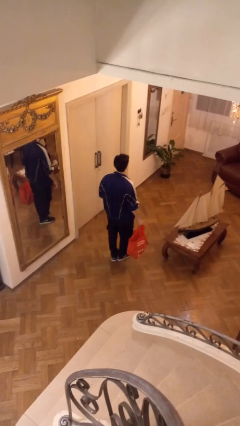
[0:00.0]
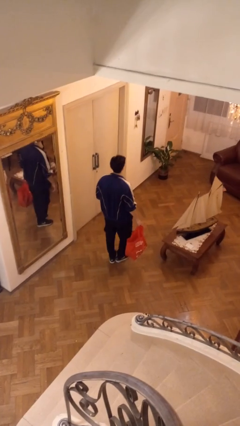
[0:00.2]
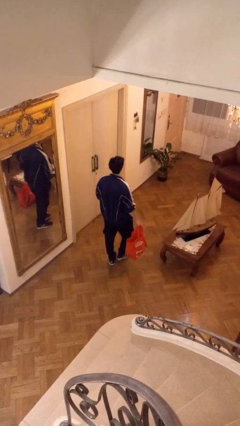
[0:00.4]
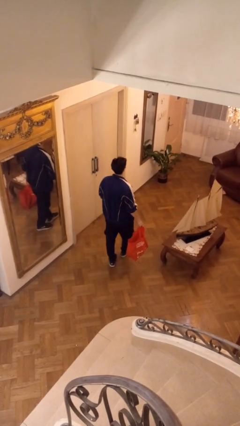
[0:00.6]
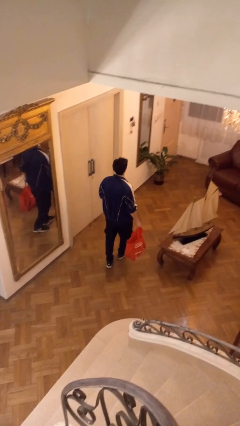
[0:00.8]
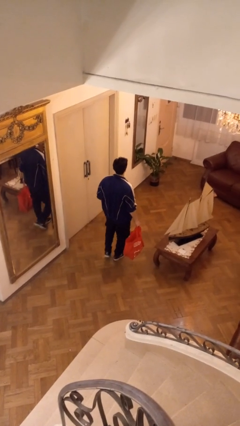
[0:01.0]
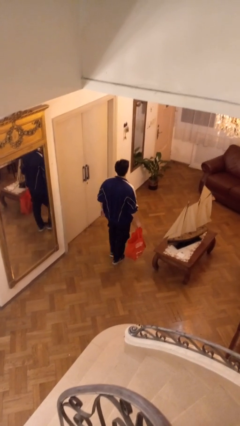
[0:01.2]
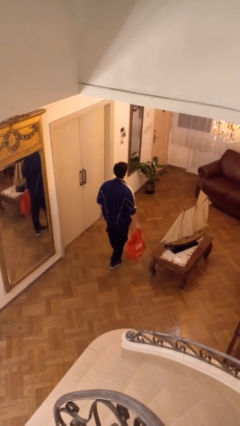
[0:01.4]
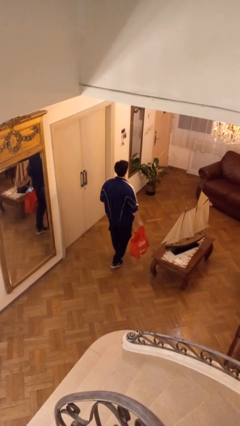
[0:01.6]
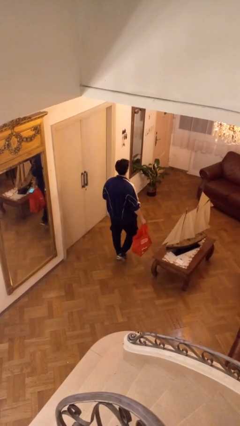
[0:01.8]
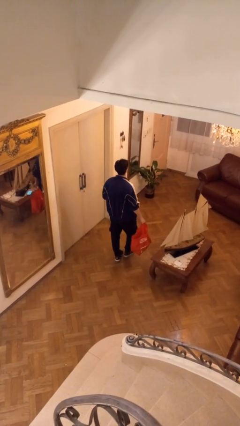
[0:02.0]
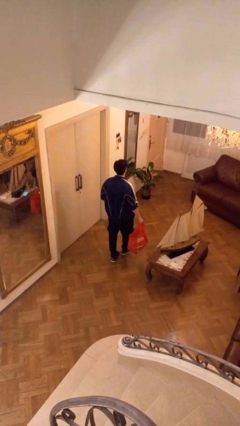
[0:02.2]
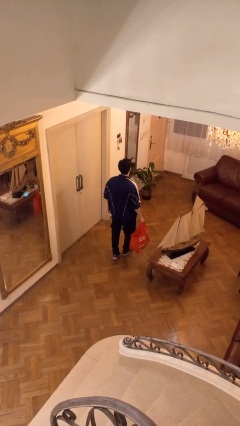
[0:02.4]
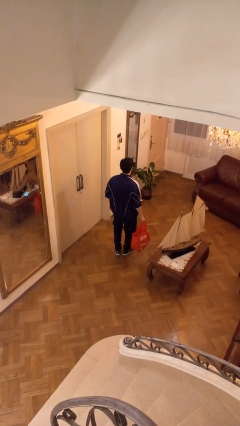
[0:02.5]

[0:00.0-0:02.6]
person carries groceries

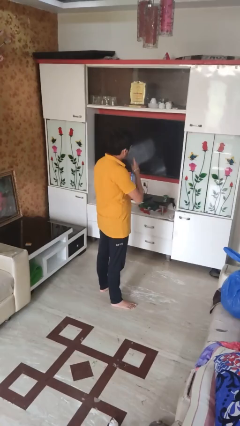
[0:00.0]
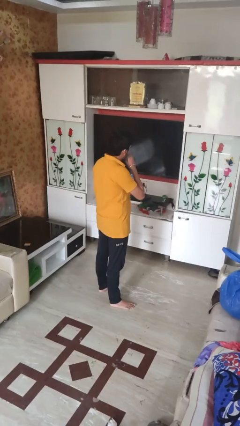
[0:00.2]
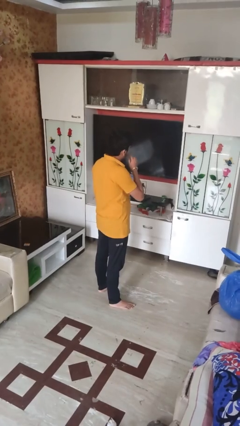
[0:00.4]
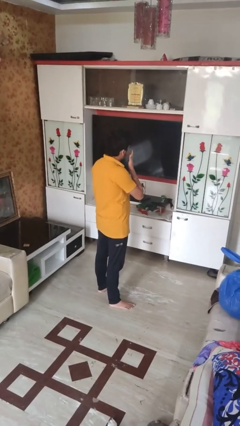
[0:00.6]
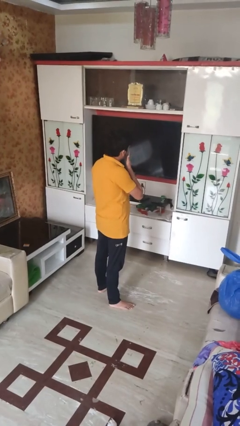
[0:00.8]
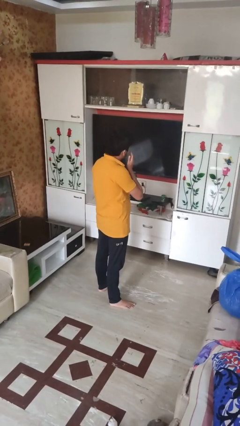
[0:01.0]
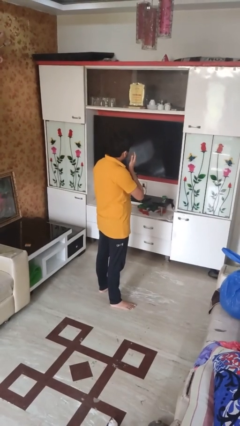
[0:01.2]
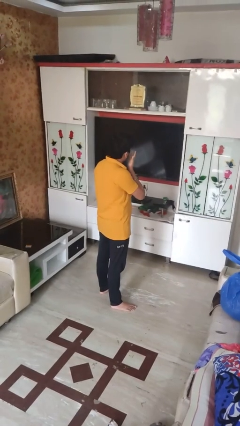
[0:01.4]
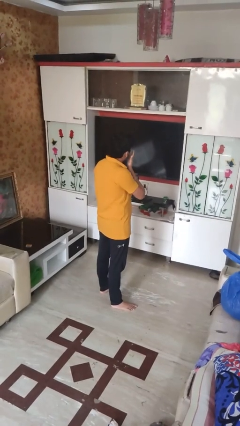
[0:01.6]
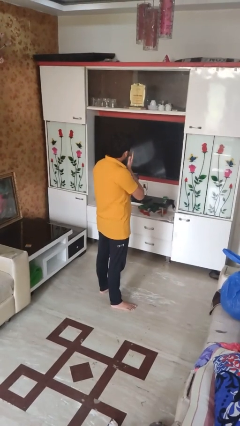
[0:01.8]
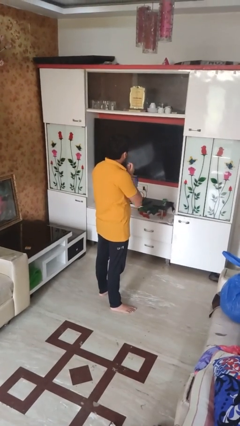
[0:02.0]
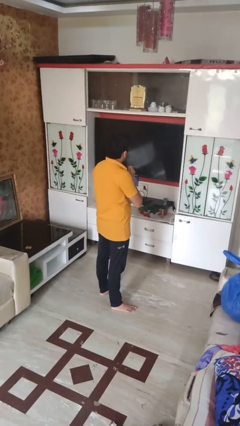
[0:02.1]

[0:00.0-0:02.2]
person licks fingers

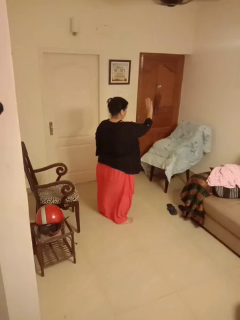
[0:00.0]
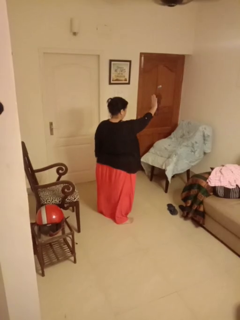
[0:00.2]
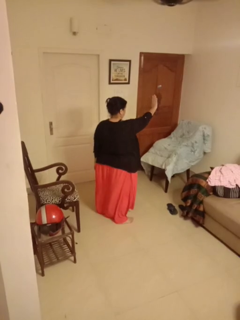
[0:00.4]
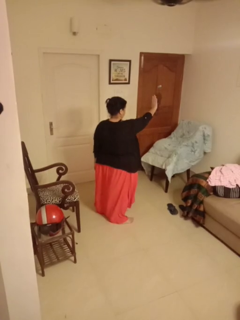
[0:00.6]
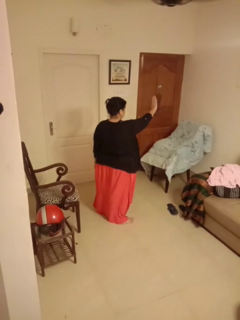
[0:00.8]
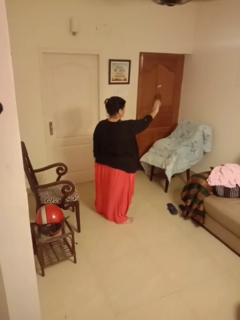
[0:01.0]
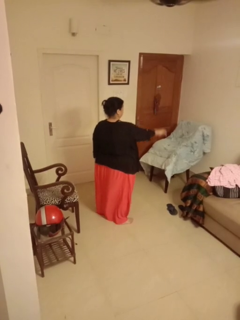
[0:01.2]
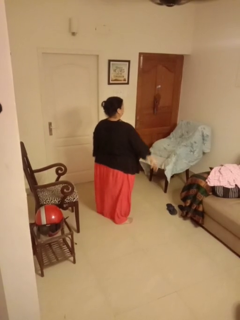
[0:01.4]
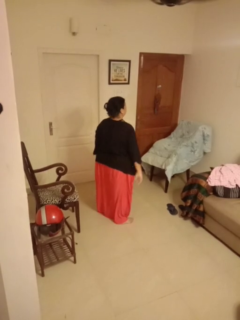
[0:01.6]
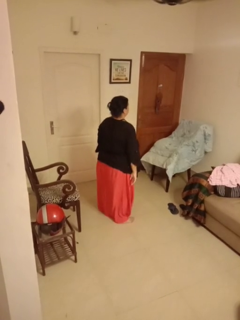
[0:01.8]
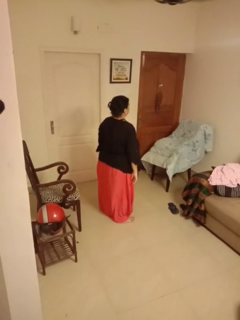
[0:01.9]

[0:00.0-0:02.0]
person gestures stop

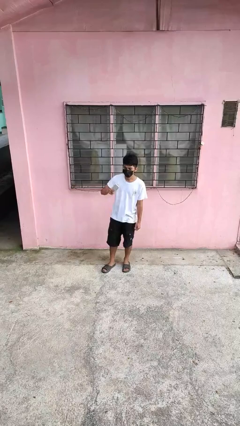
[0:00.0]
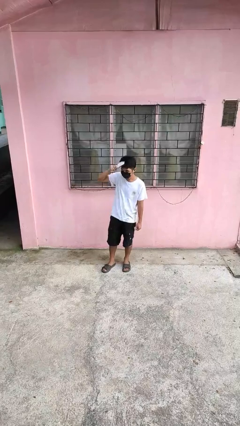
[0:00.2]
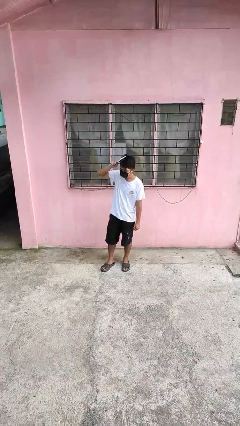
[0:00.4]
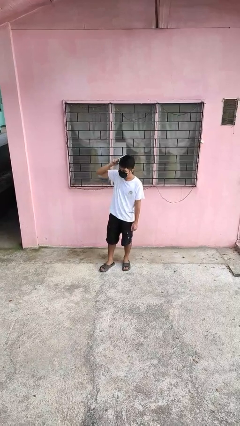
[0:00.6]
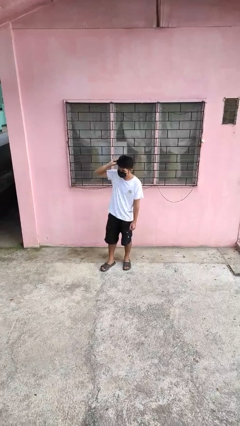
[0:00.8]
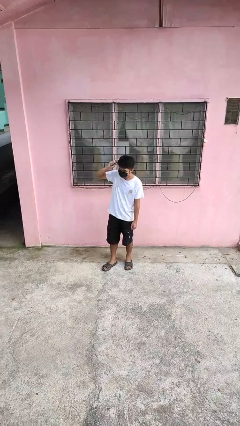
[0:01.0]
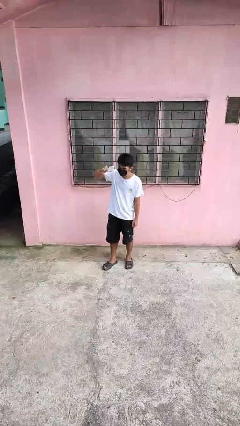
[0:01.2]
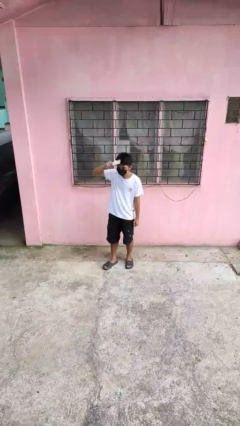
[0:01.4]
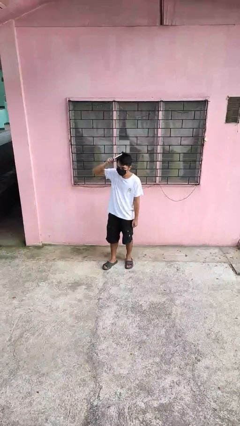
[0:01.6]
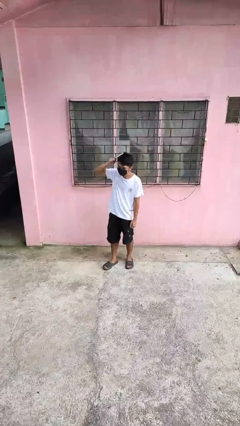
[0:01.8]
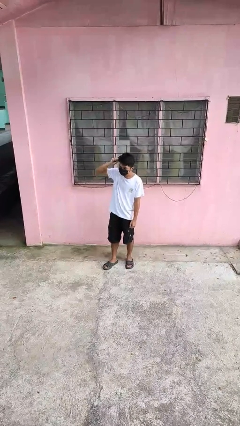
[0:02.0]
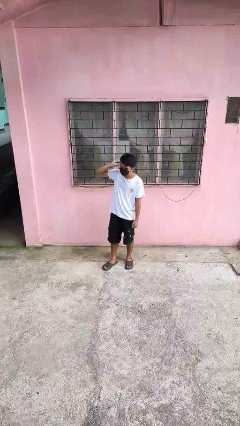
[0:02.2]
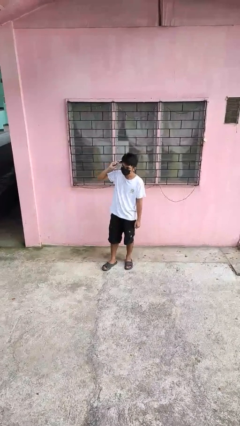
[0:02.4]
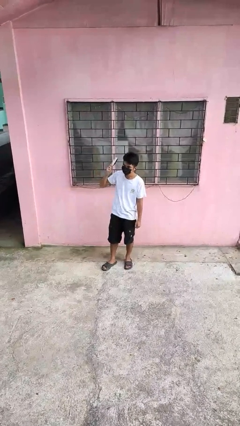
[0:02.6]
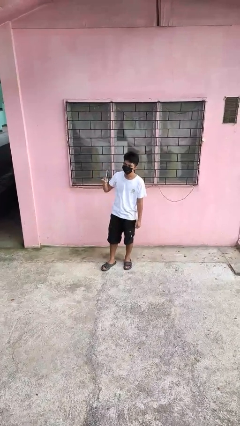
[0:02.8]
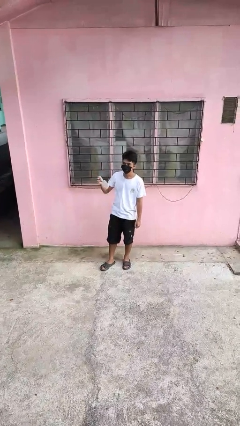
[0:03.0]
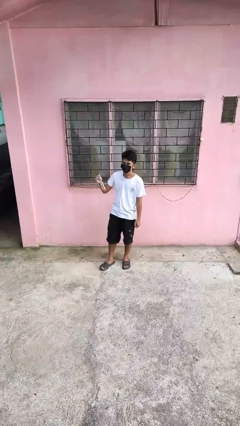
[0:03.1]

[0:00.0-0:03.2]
person brushes hair

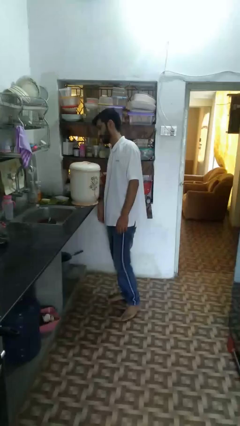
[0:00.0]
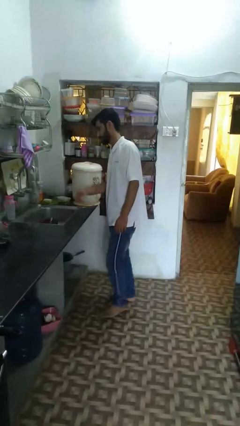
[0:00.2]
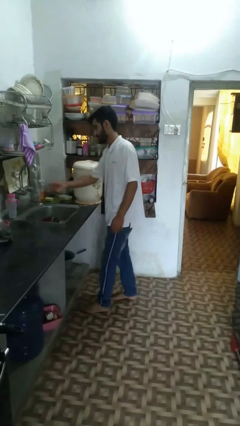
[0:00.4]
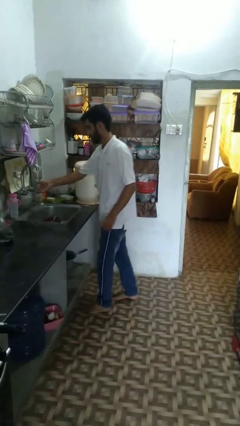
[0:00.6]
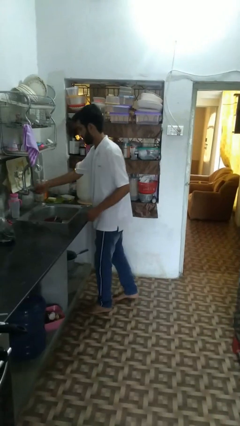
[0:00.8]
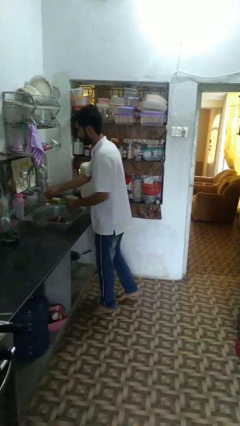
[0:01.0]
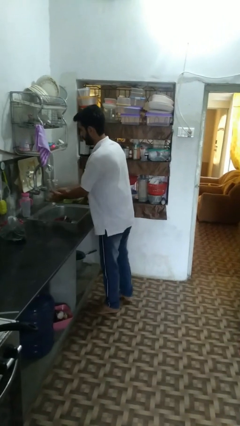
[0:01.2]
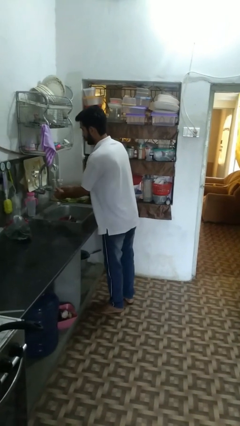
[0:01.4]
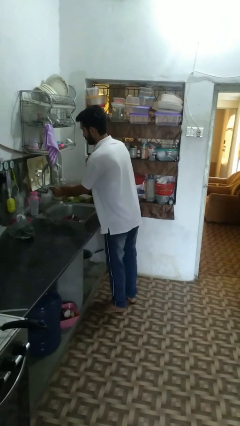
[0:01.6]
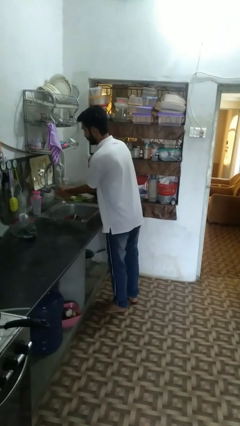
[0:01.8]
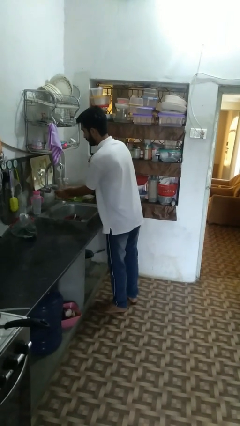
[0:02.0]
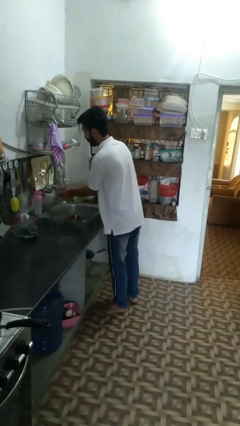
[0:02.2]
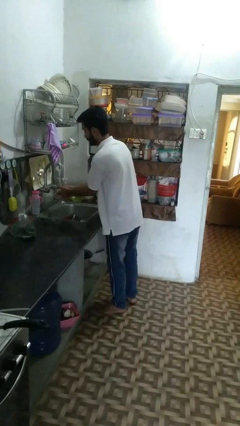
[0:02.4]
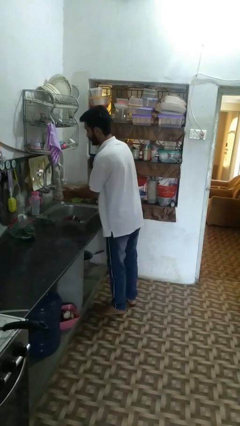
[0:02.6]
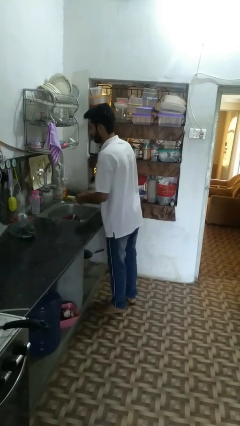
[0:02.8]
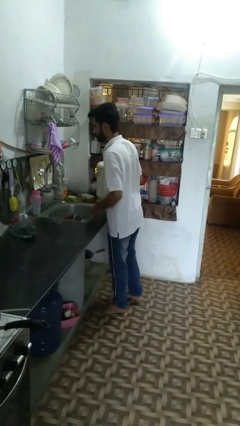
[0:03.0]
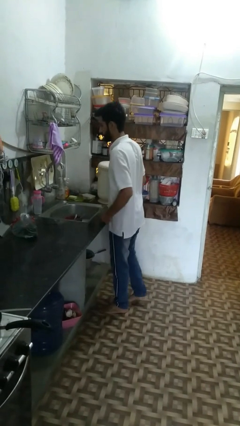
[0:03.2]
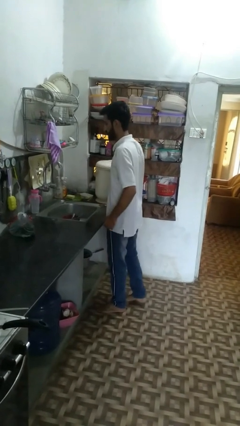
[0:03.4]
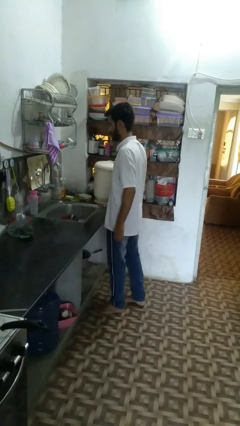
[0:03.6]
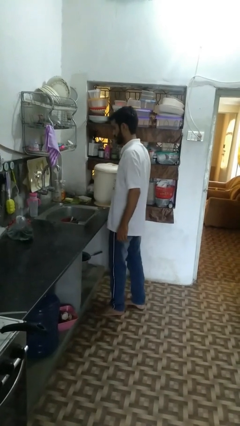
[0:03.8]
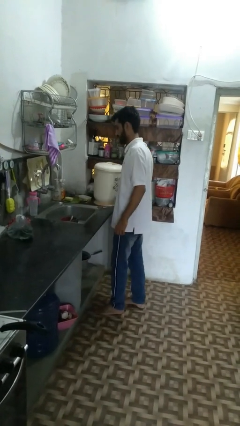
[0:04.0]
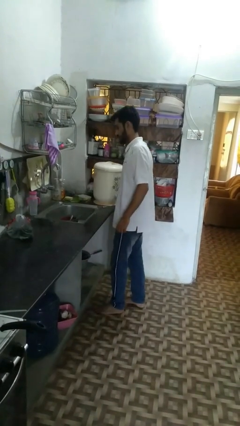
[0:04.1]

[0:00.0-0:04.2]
person washes hands

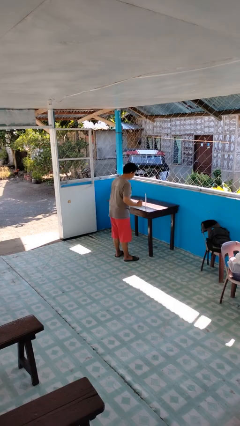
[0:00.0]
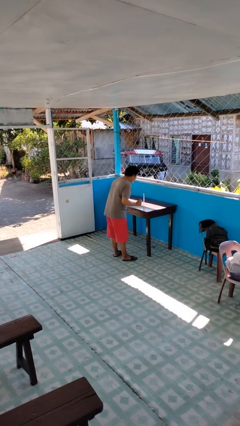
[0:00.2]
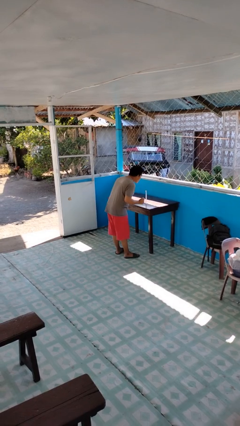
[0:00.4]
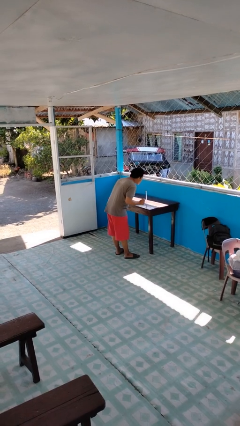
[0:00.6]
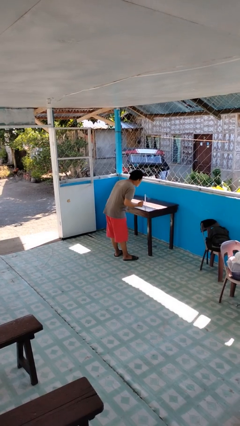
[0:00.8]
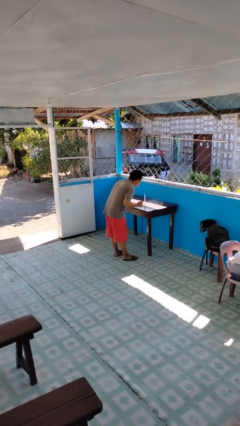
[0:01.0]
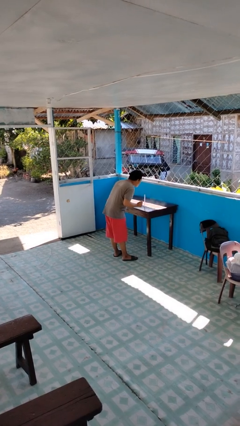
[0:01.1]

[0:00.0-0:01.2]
person extinguishes candle

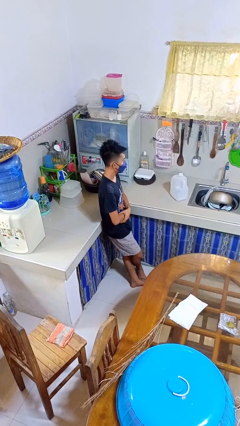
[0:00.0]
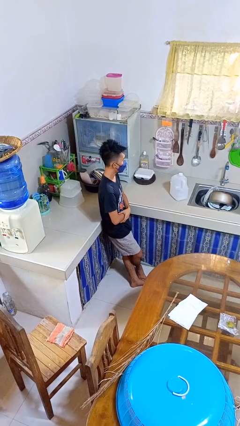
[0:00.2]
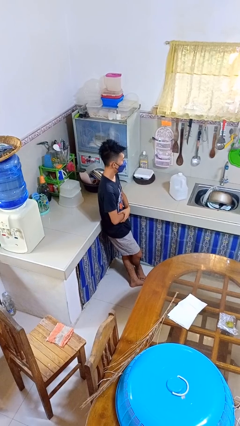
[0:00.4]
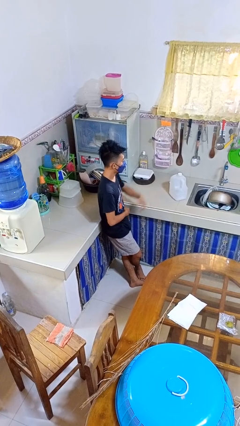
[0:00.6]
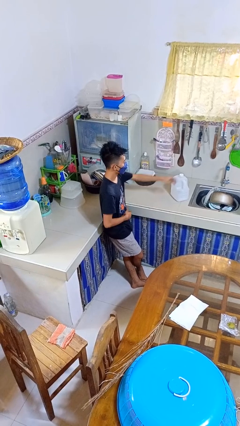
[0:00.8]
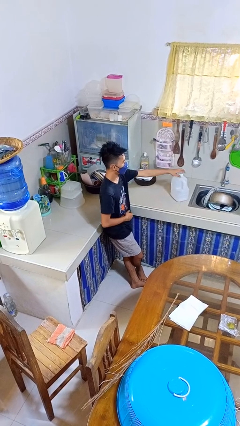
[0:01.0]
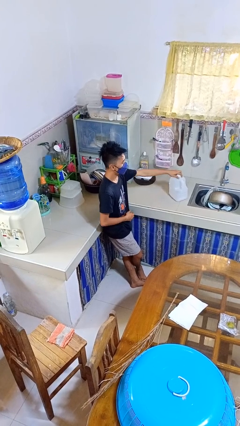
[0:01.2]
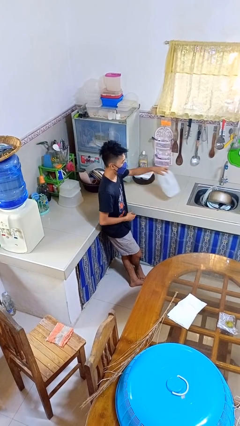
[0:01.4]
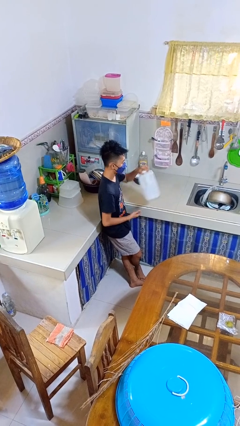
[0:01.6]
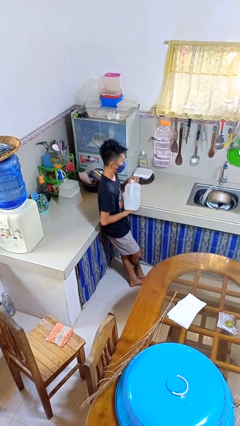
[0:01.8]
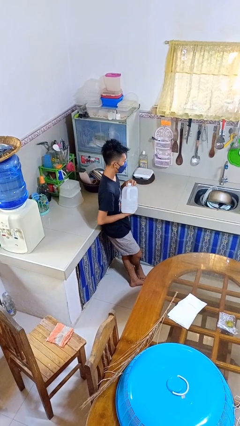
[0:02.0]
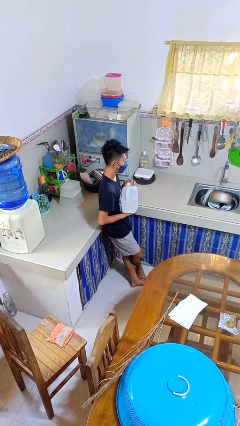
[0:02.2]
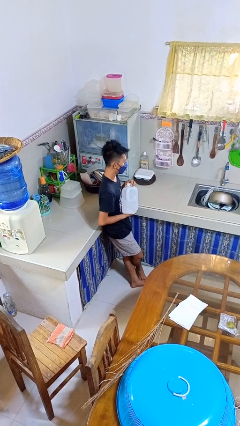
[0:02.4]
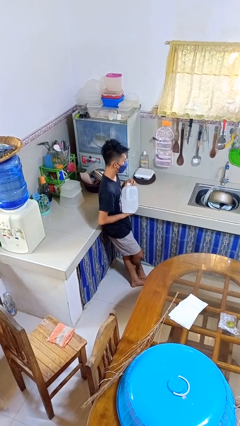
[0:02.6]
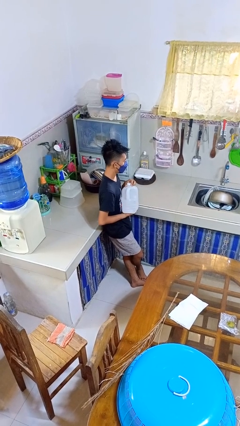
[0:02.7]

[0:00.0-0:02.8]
person picks up object from countertop
